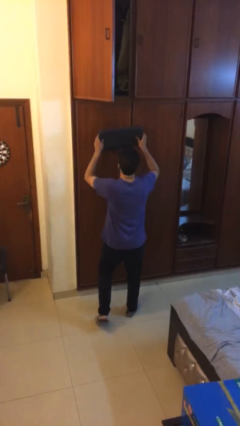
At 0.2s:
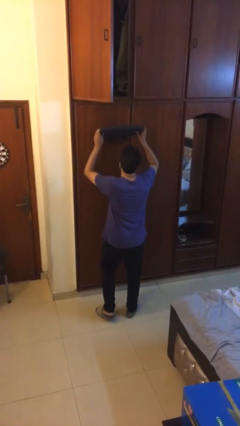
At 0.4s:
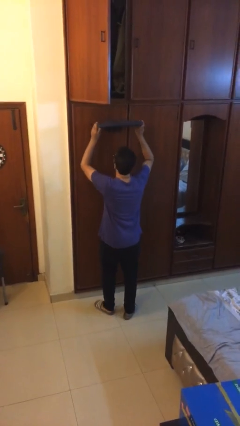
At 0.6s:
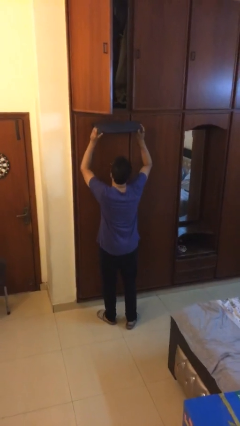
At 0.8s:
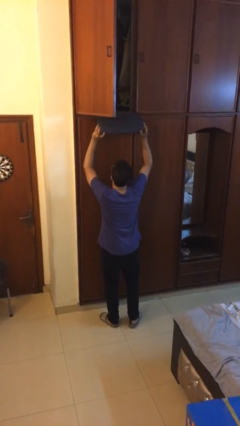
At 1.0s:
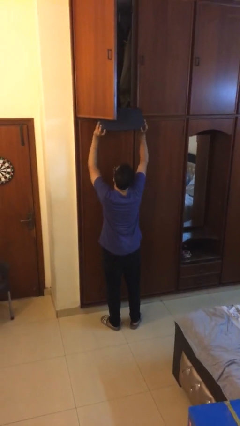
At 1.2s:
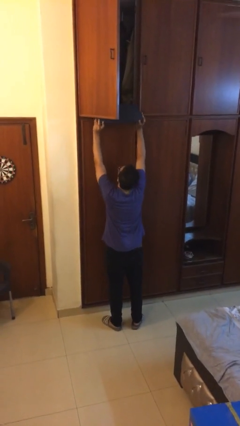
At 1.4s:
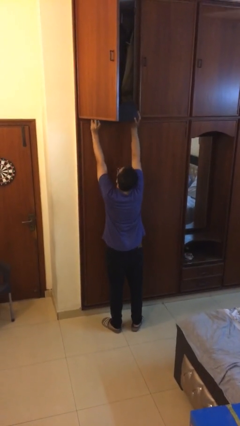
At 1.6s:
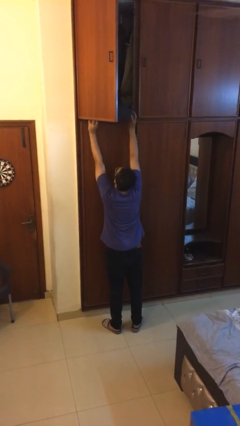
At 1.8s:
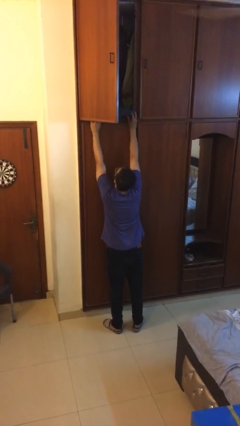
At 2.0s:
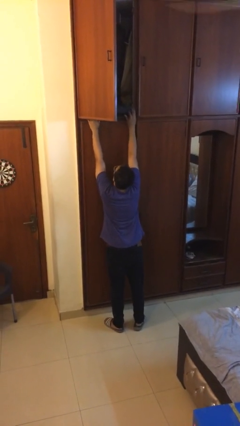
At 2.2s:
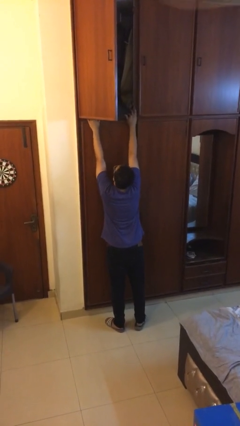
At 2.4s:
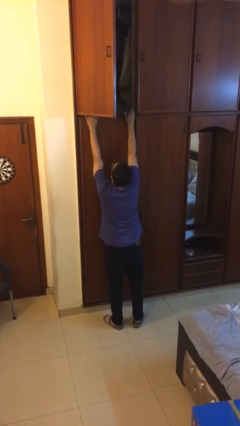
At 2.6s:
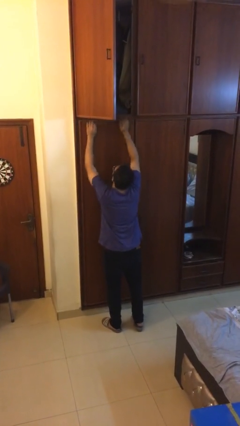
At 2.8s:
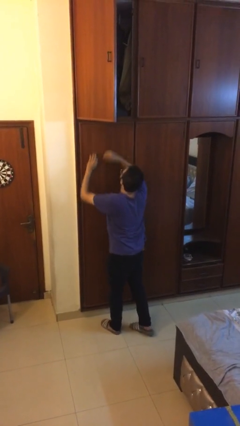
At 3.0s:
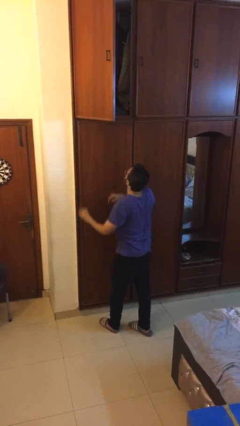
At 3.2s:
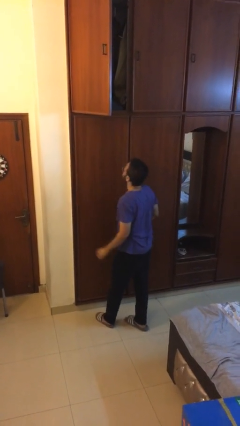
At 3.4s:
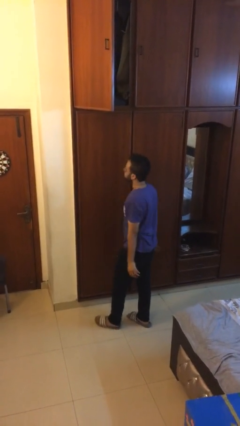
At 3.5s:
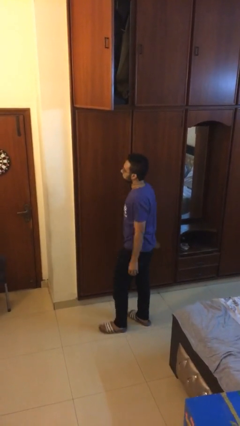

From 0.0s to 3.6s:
person puts down object on shelf

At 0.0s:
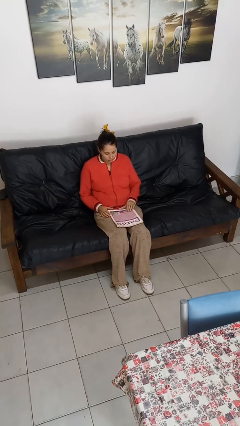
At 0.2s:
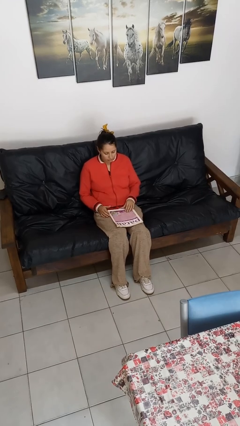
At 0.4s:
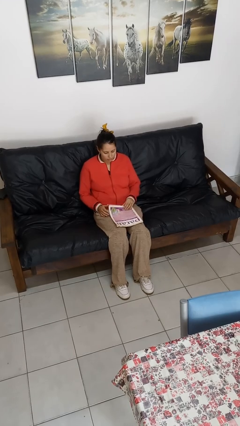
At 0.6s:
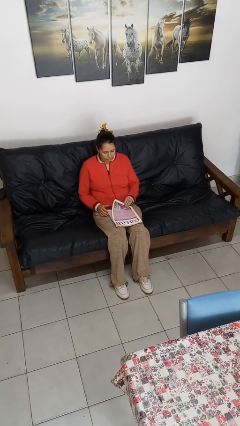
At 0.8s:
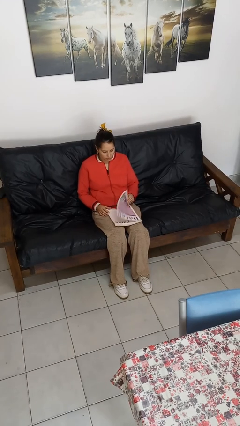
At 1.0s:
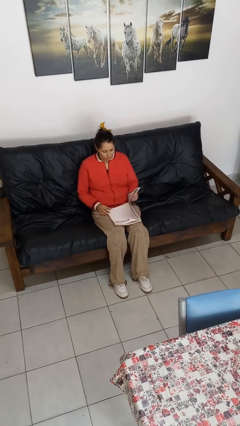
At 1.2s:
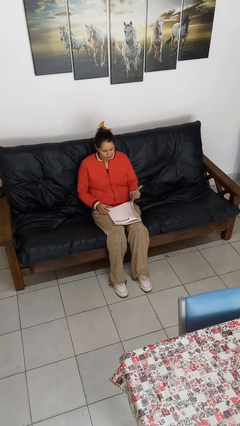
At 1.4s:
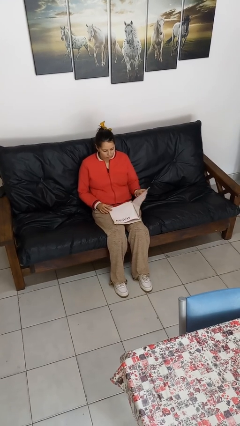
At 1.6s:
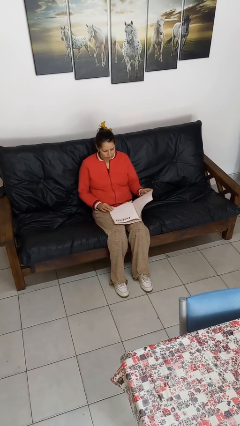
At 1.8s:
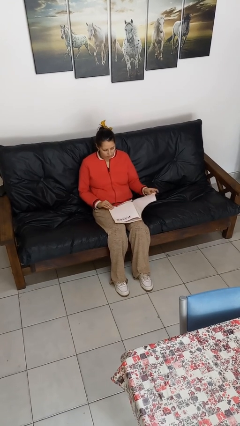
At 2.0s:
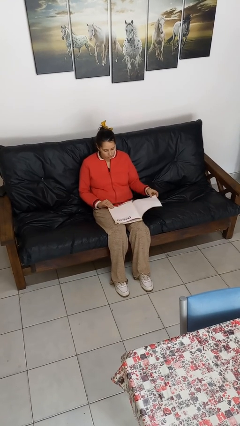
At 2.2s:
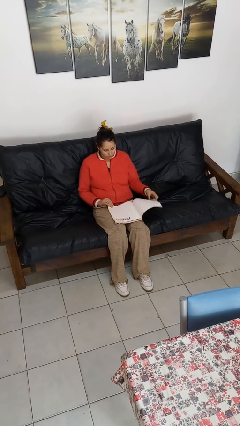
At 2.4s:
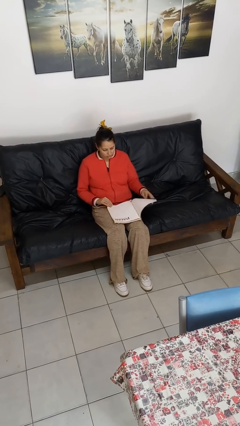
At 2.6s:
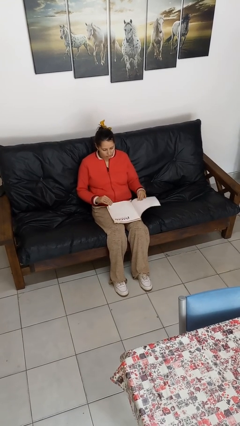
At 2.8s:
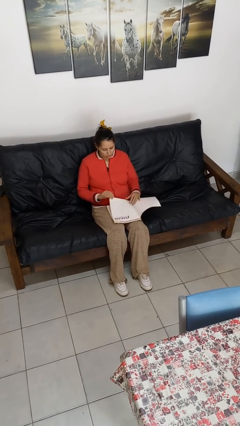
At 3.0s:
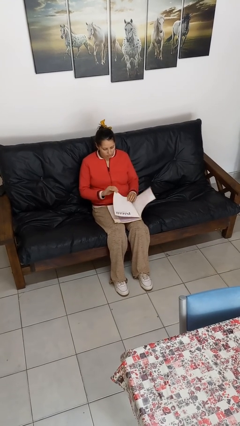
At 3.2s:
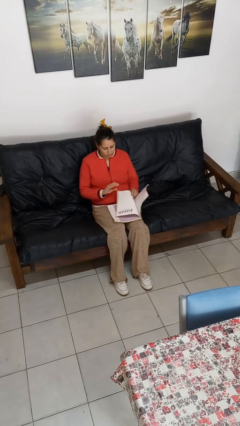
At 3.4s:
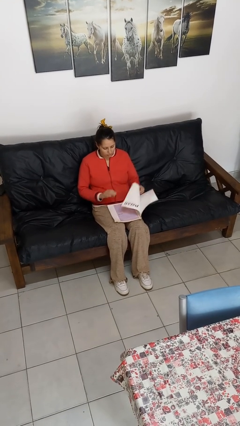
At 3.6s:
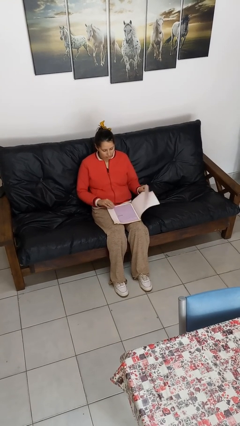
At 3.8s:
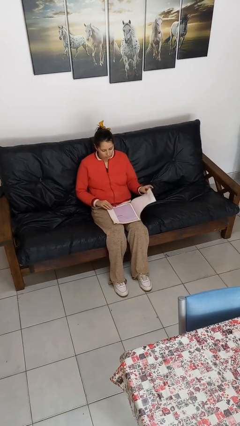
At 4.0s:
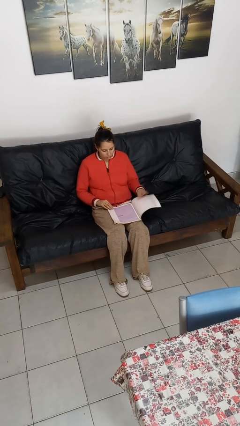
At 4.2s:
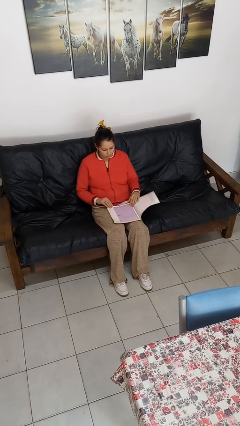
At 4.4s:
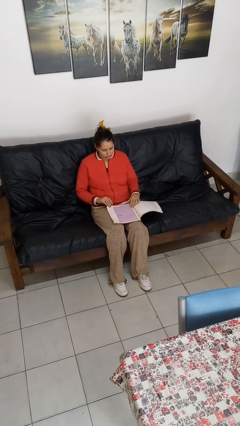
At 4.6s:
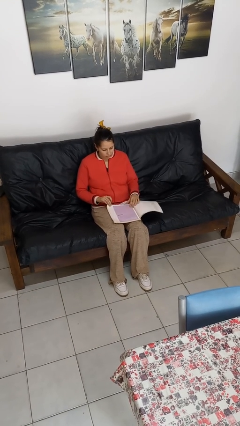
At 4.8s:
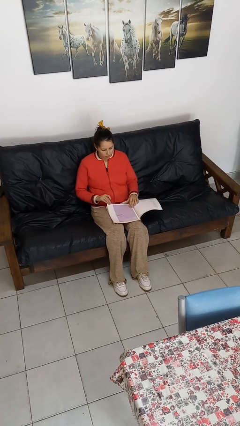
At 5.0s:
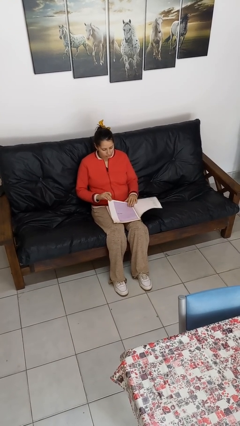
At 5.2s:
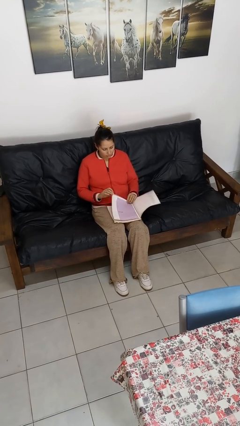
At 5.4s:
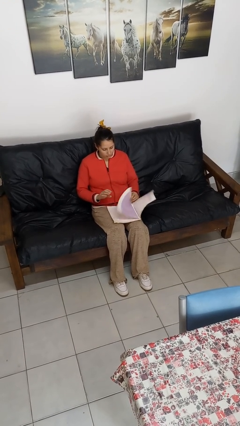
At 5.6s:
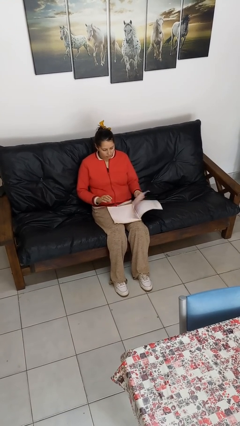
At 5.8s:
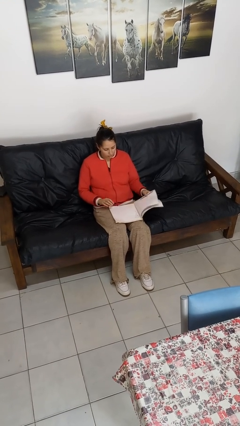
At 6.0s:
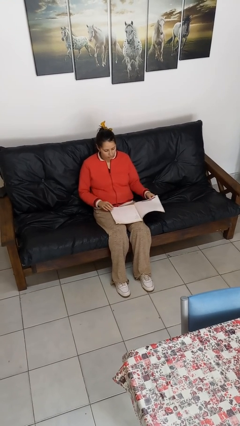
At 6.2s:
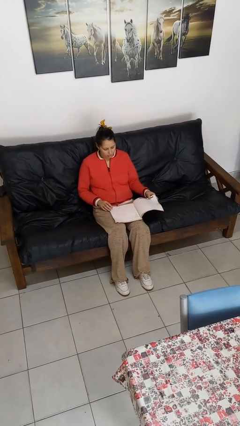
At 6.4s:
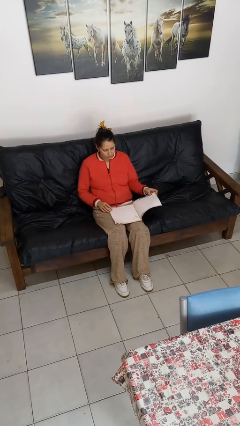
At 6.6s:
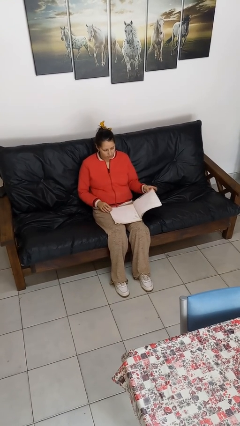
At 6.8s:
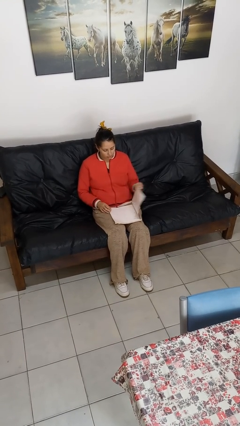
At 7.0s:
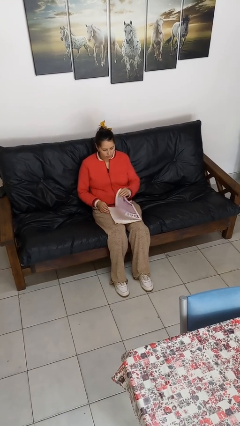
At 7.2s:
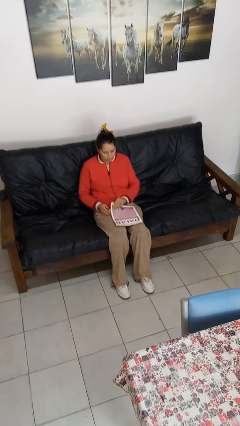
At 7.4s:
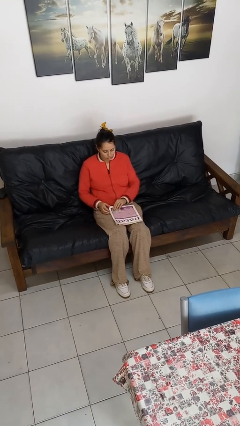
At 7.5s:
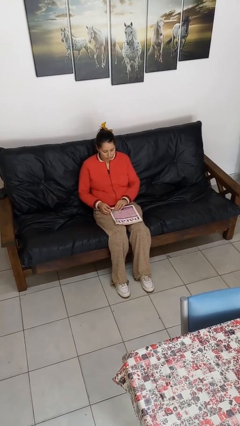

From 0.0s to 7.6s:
person reads magazine

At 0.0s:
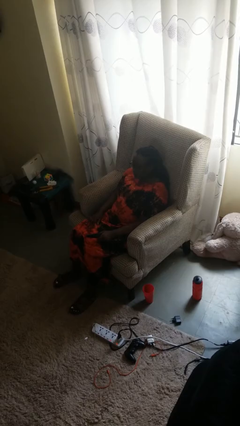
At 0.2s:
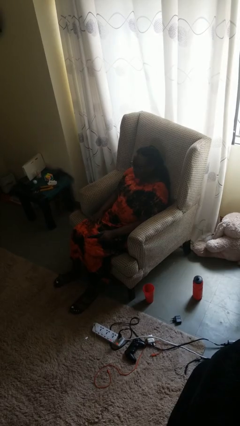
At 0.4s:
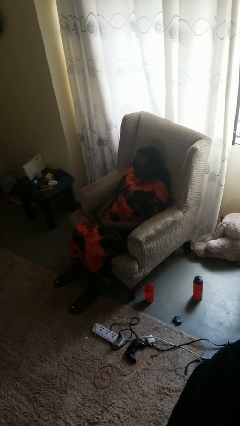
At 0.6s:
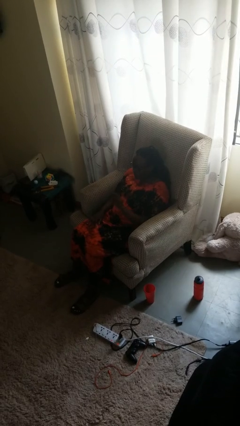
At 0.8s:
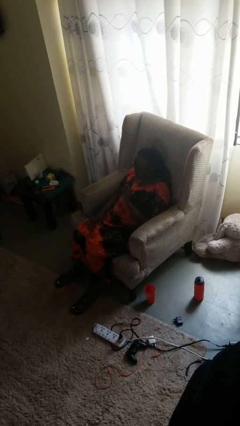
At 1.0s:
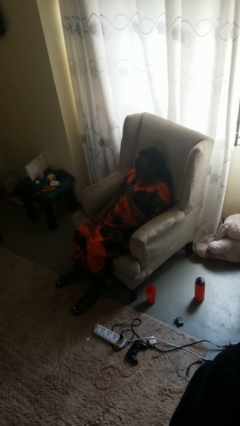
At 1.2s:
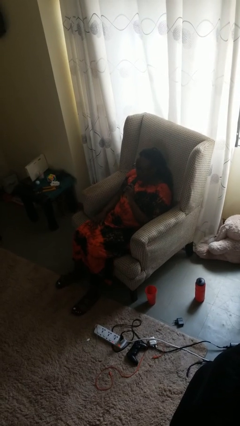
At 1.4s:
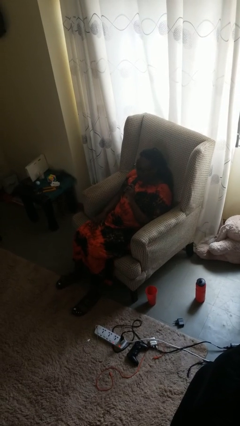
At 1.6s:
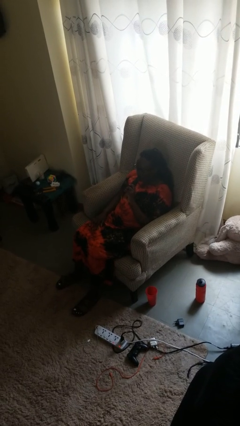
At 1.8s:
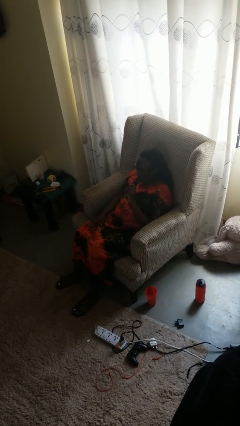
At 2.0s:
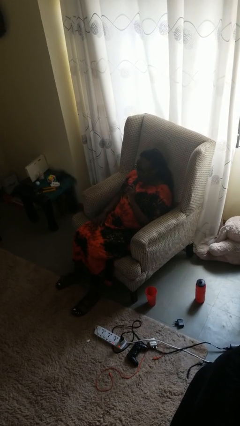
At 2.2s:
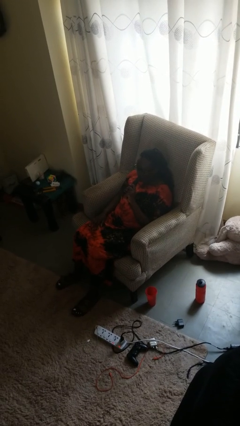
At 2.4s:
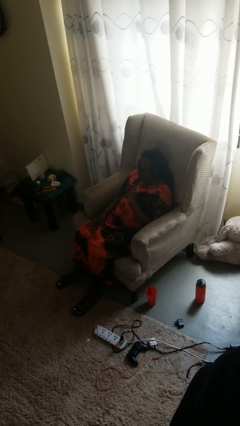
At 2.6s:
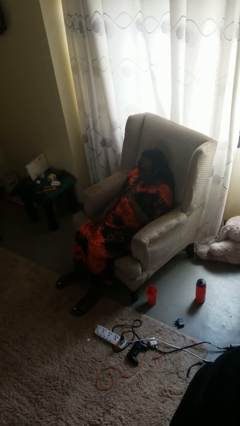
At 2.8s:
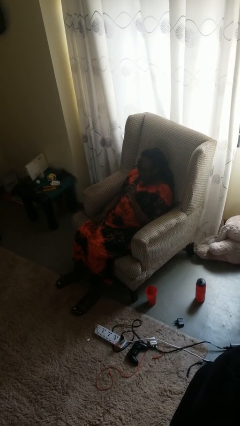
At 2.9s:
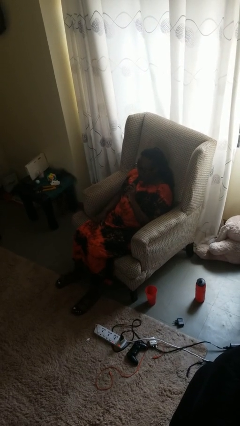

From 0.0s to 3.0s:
person vapes

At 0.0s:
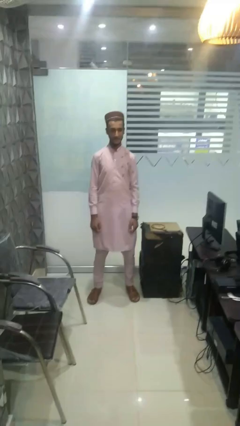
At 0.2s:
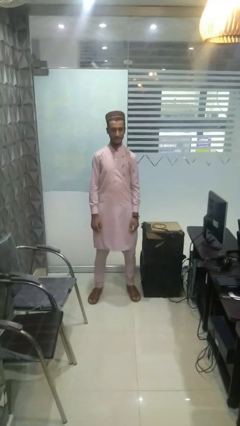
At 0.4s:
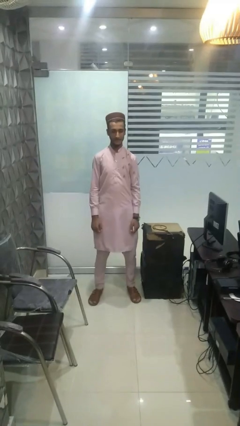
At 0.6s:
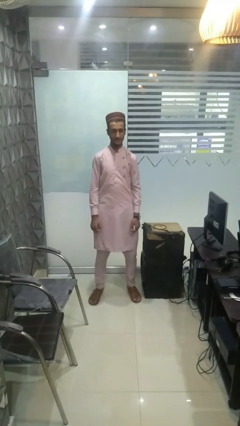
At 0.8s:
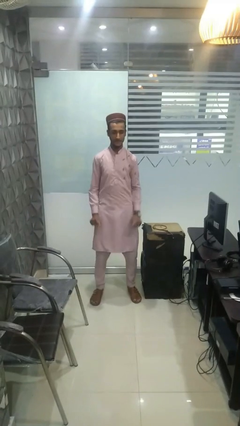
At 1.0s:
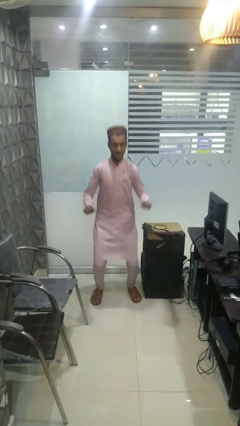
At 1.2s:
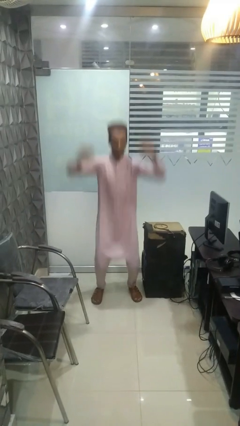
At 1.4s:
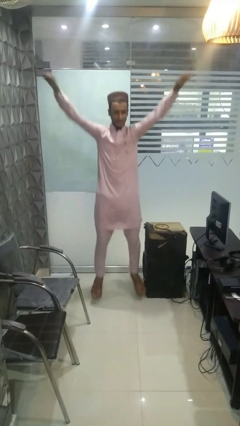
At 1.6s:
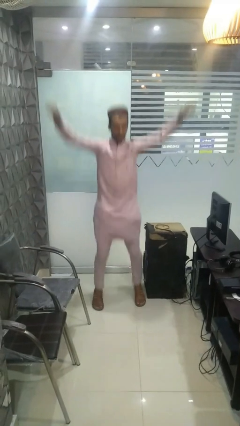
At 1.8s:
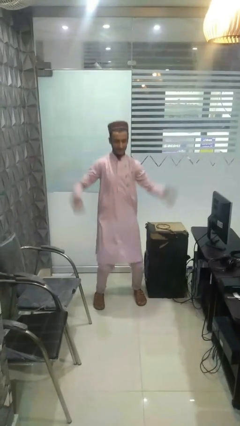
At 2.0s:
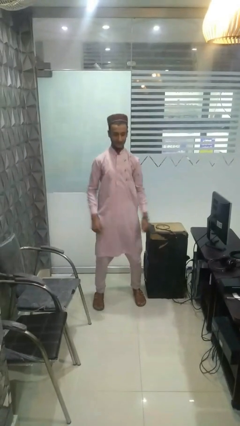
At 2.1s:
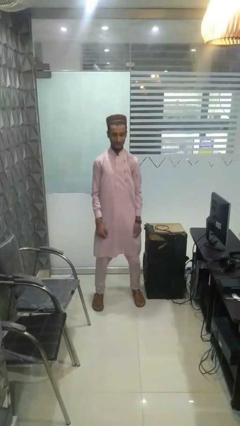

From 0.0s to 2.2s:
person exercises with jumping jacks

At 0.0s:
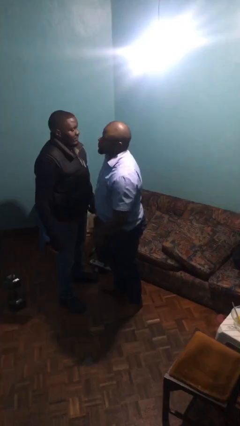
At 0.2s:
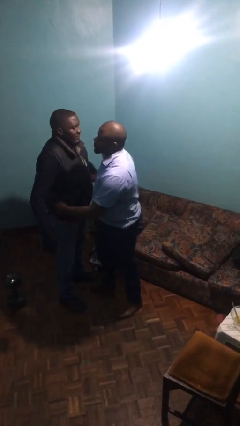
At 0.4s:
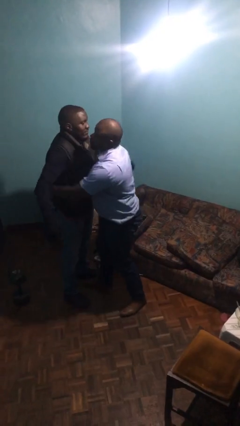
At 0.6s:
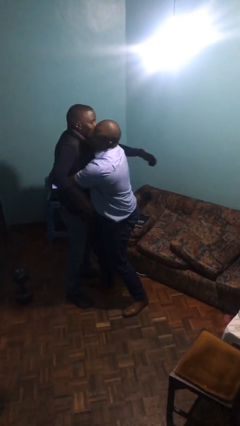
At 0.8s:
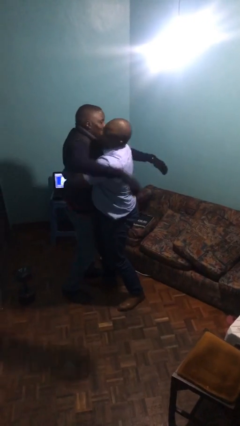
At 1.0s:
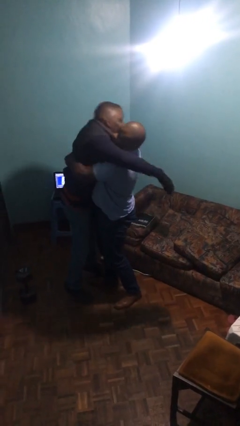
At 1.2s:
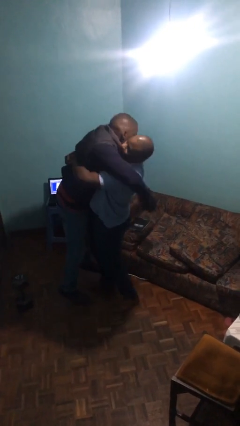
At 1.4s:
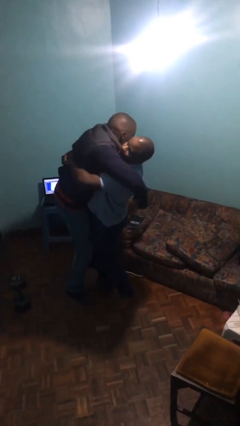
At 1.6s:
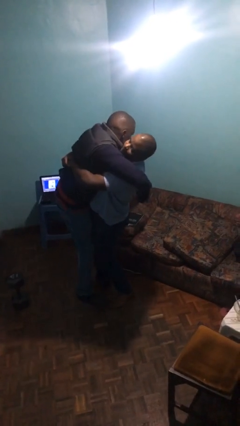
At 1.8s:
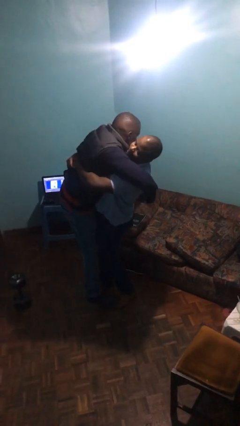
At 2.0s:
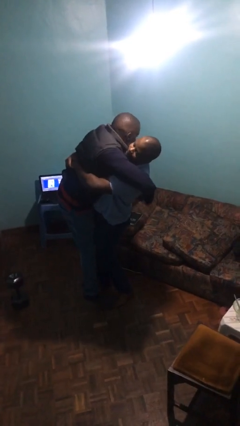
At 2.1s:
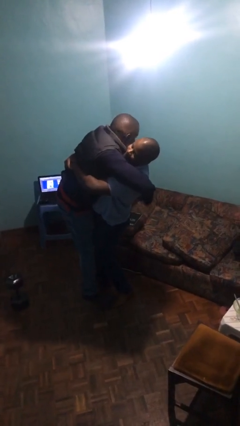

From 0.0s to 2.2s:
person picks up person
